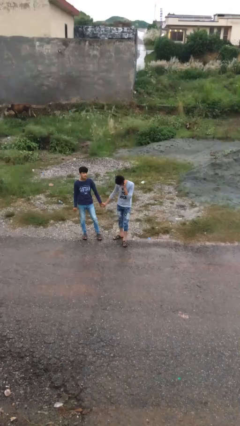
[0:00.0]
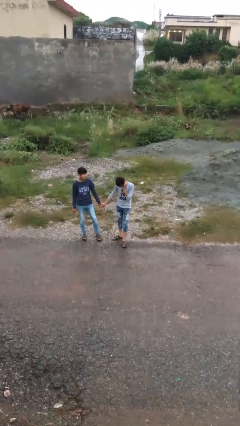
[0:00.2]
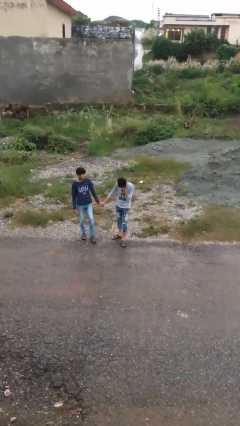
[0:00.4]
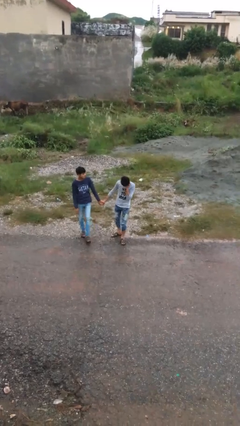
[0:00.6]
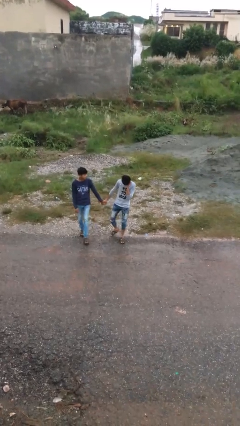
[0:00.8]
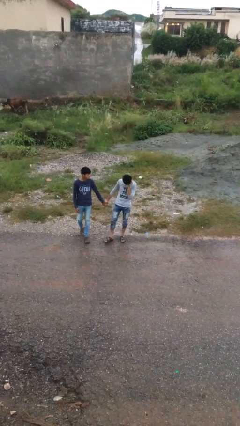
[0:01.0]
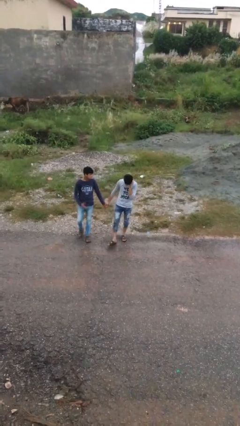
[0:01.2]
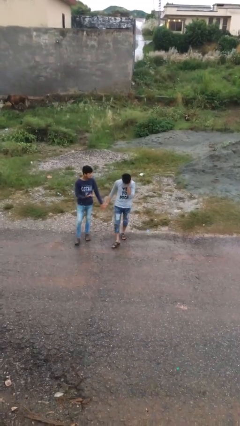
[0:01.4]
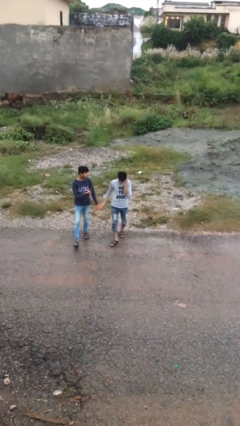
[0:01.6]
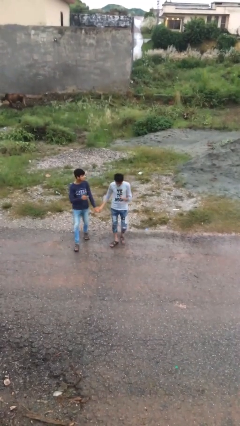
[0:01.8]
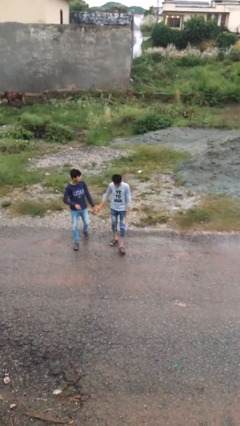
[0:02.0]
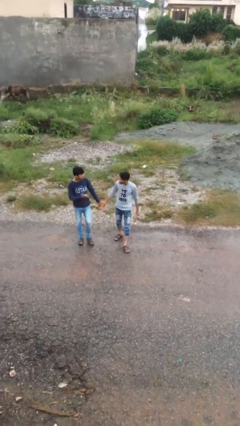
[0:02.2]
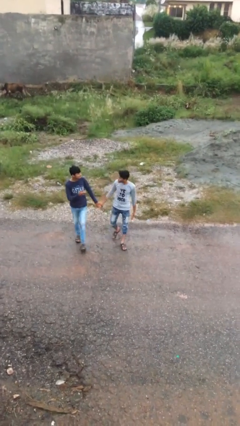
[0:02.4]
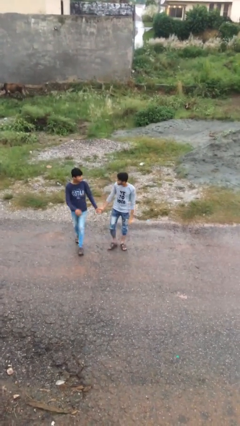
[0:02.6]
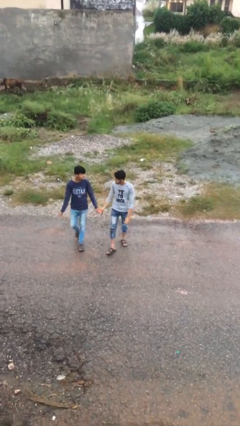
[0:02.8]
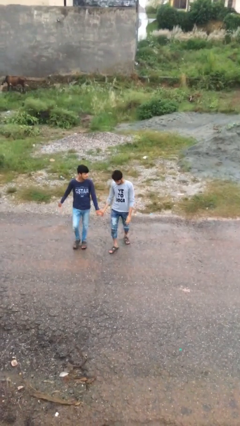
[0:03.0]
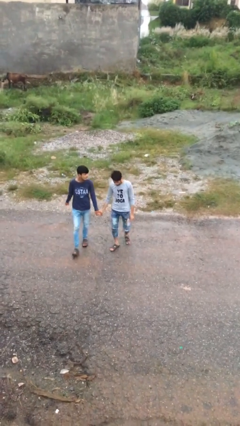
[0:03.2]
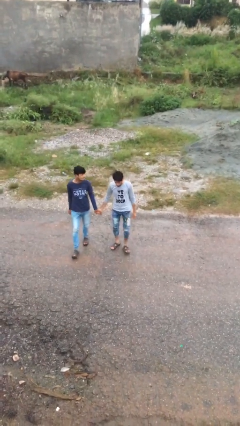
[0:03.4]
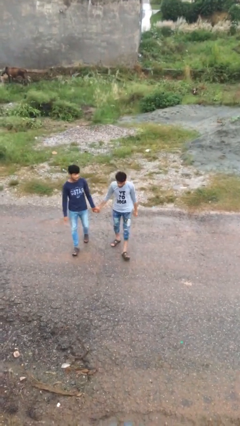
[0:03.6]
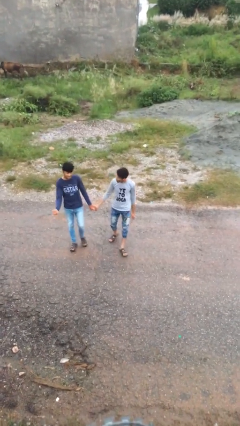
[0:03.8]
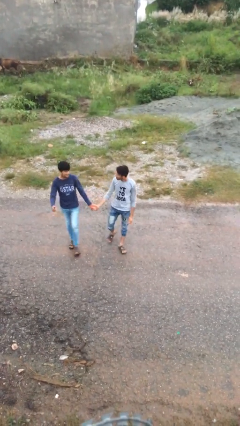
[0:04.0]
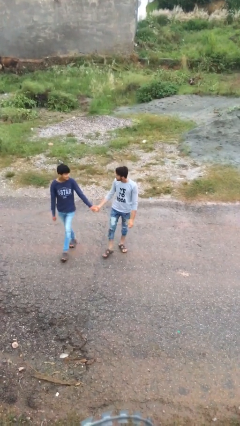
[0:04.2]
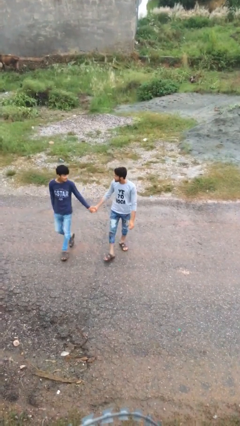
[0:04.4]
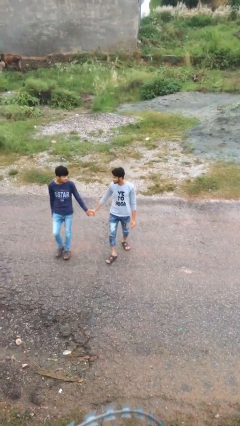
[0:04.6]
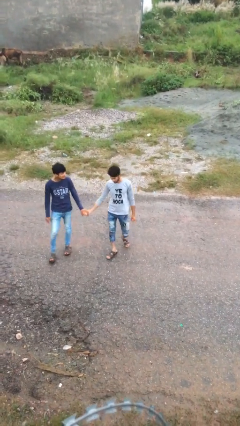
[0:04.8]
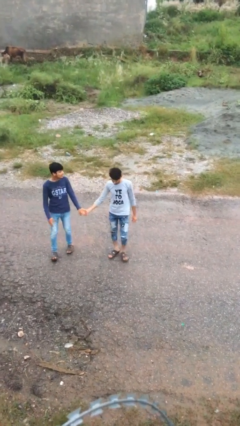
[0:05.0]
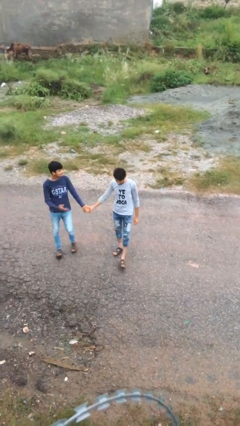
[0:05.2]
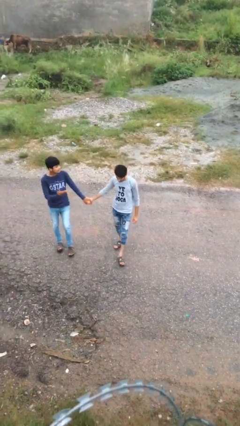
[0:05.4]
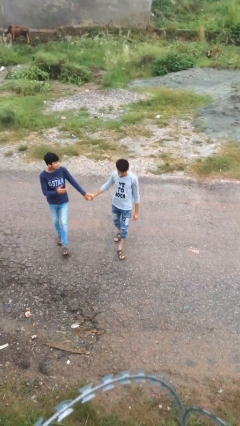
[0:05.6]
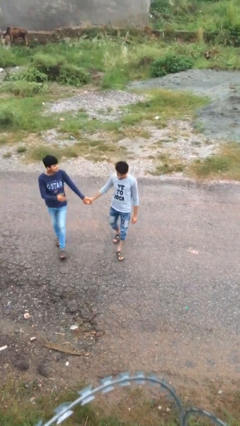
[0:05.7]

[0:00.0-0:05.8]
person holds hand

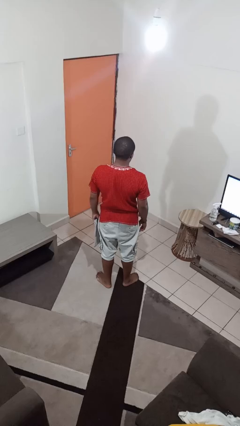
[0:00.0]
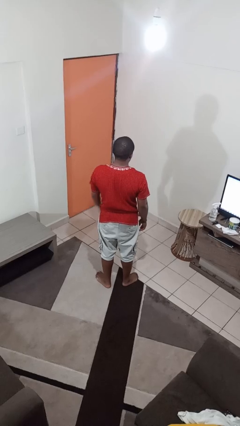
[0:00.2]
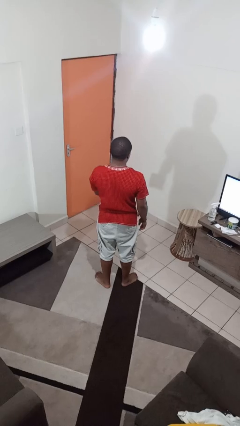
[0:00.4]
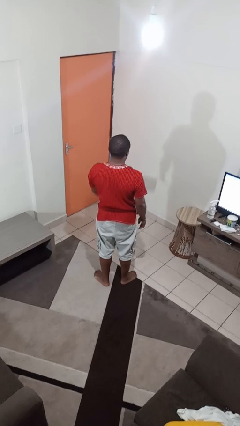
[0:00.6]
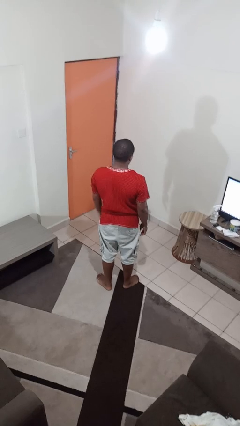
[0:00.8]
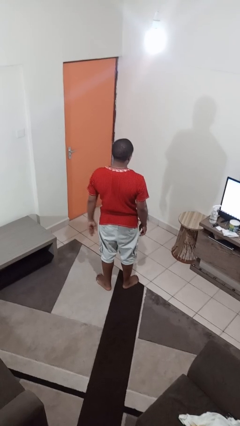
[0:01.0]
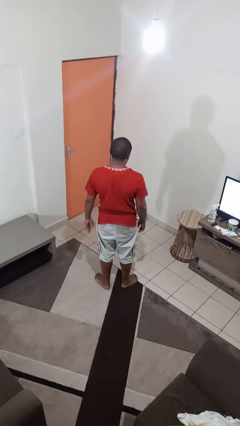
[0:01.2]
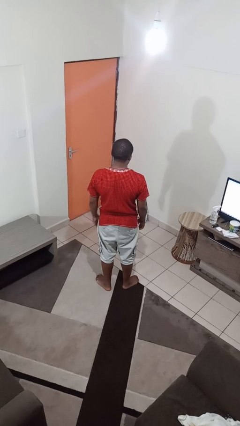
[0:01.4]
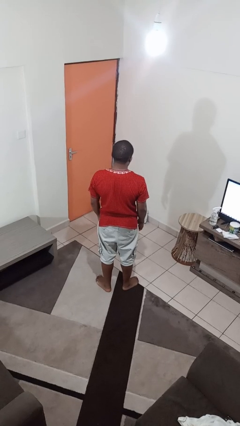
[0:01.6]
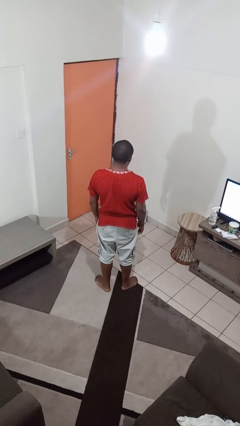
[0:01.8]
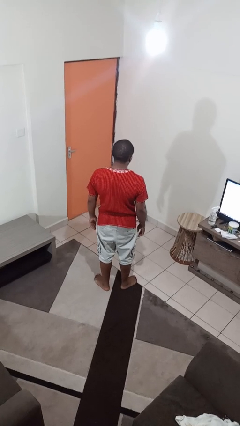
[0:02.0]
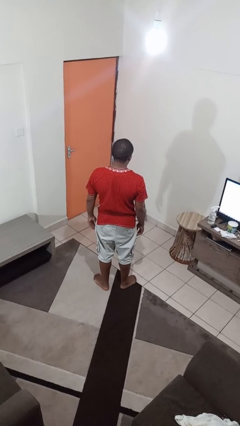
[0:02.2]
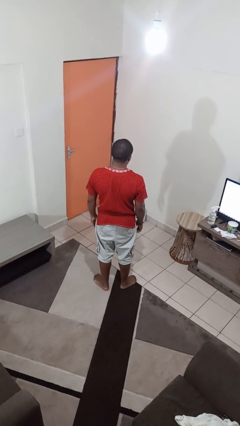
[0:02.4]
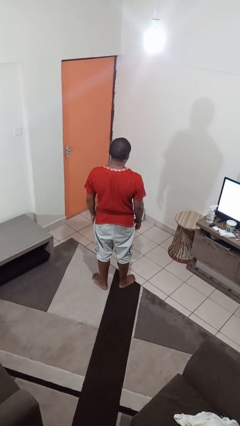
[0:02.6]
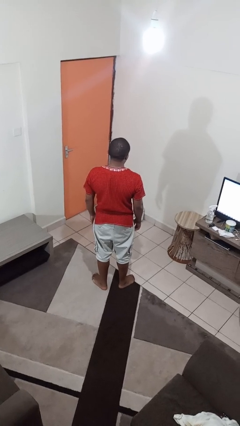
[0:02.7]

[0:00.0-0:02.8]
person throws object to ground

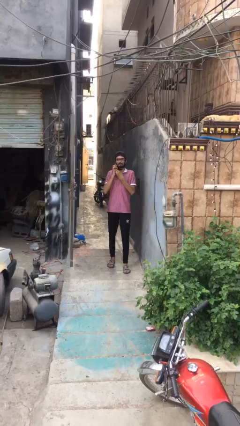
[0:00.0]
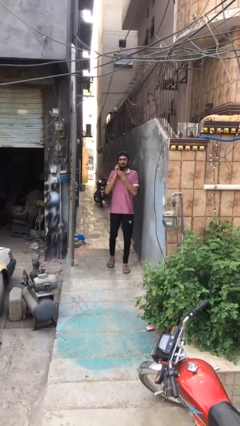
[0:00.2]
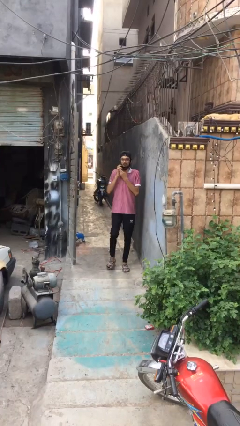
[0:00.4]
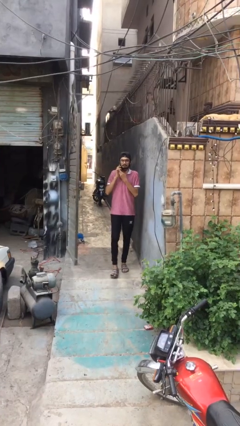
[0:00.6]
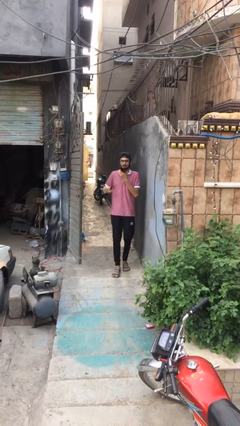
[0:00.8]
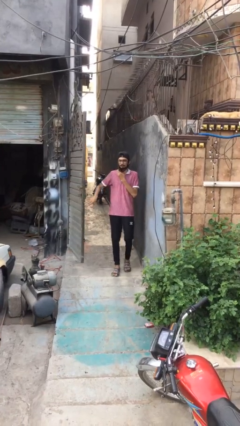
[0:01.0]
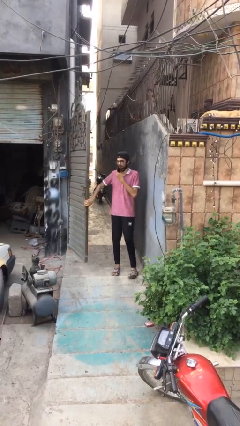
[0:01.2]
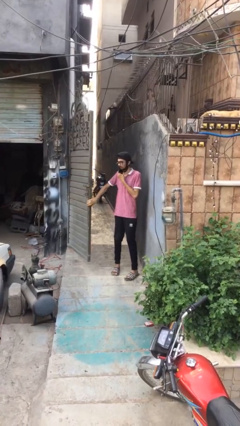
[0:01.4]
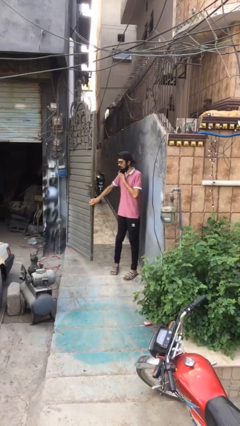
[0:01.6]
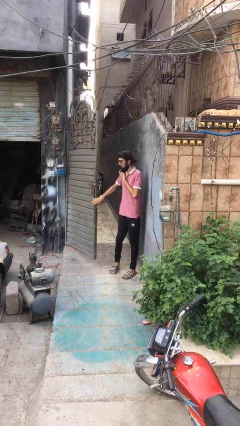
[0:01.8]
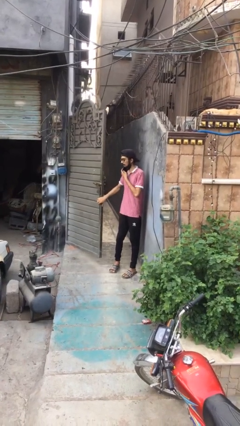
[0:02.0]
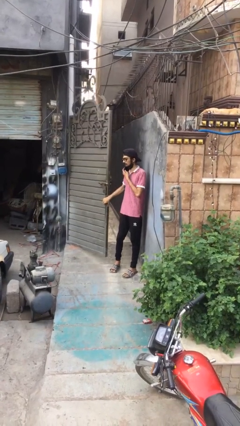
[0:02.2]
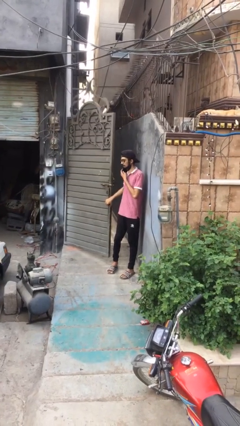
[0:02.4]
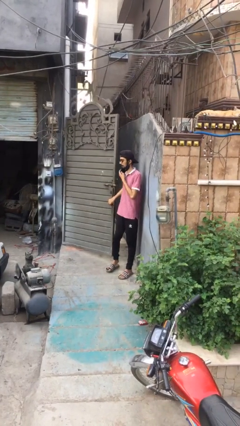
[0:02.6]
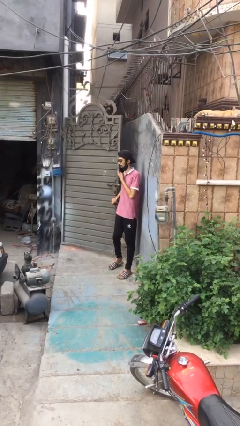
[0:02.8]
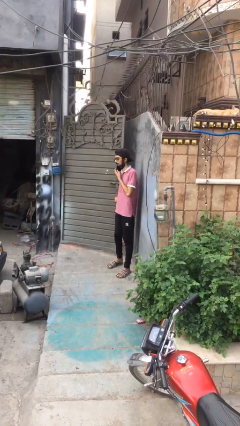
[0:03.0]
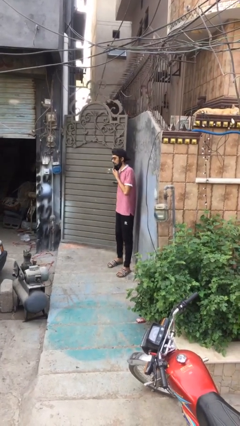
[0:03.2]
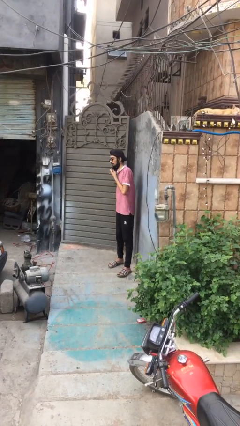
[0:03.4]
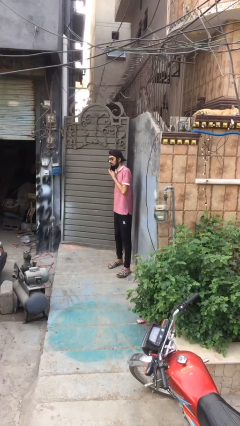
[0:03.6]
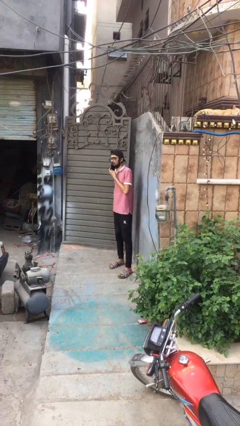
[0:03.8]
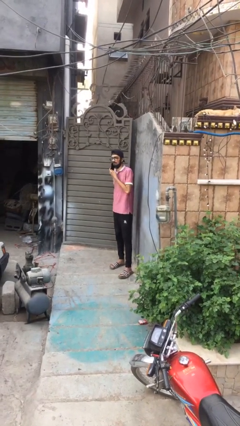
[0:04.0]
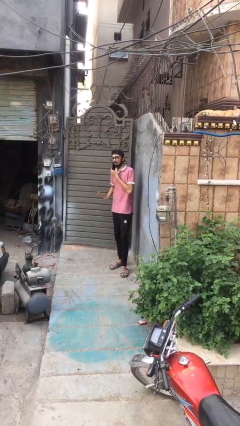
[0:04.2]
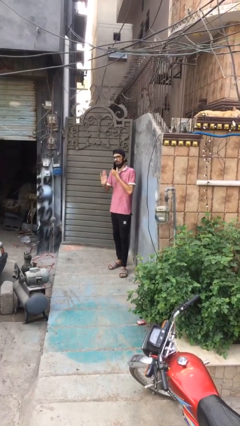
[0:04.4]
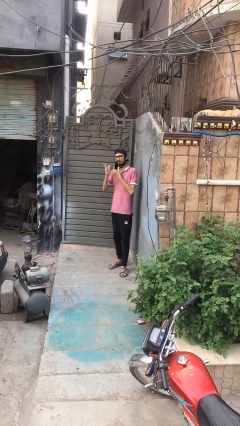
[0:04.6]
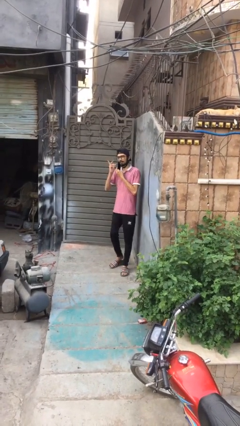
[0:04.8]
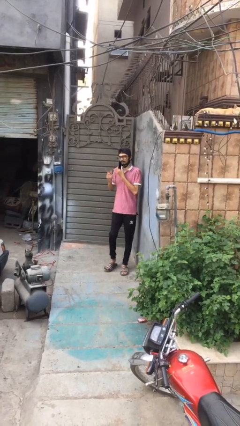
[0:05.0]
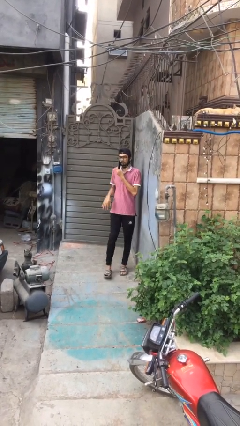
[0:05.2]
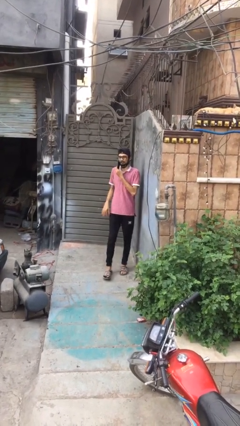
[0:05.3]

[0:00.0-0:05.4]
person closes facility door

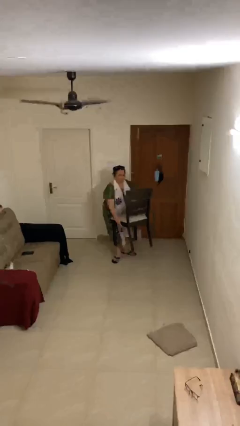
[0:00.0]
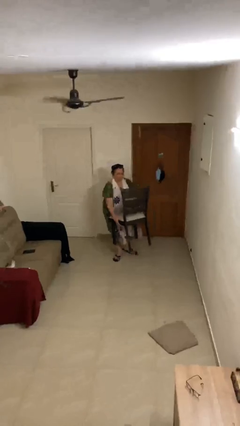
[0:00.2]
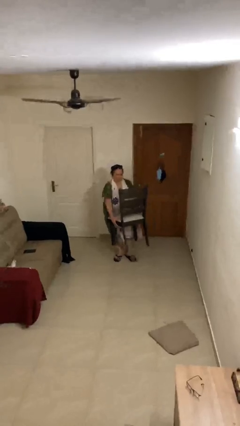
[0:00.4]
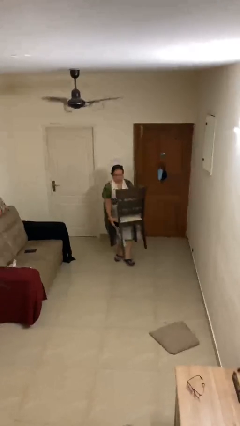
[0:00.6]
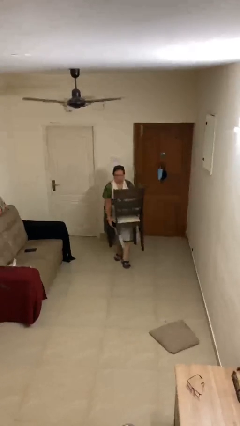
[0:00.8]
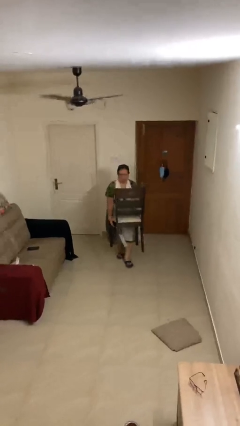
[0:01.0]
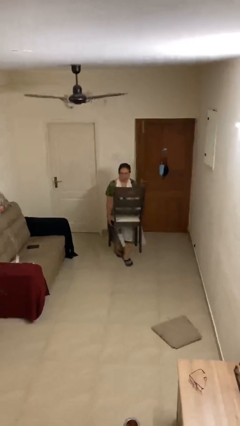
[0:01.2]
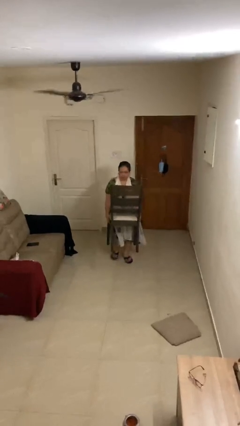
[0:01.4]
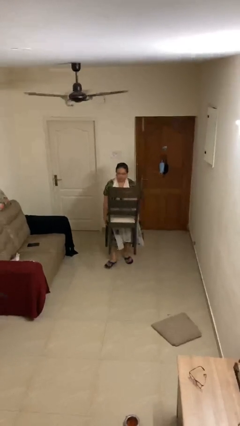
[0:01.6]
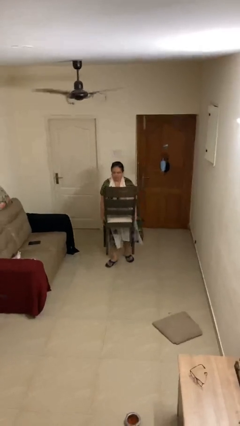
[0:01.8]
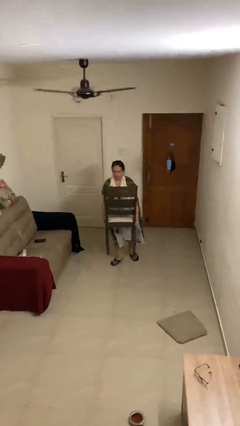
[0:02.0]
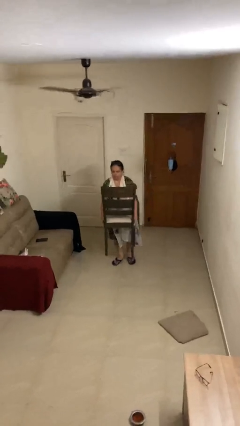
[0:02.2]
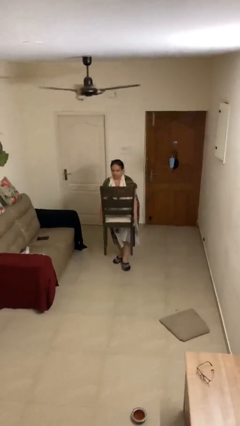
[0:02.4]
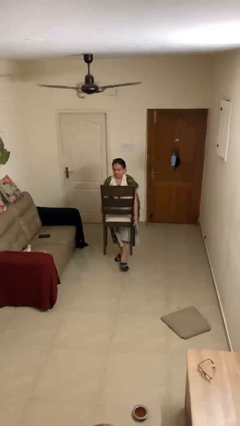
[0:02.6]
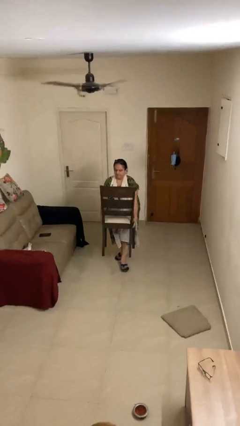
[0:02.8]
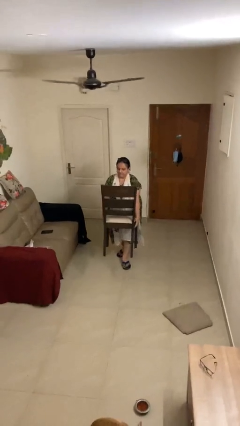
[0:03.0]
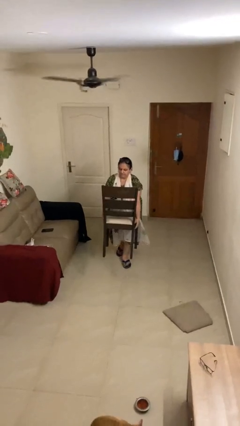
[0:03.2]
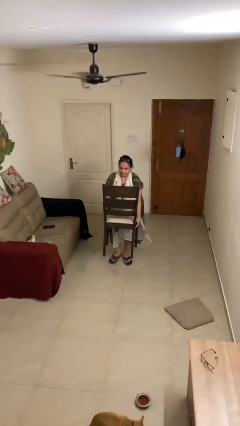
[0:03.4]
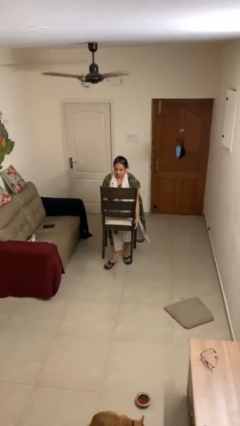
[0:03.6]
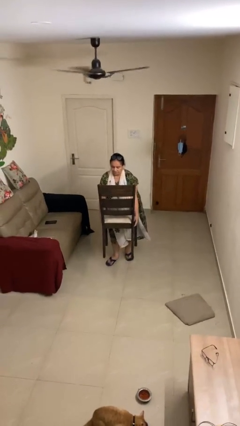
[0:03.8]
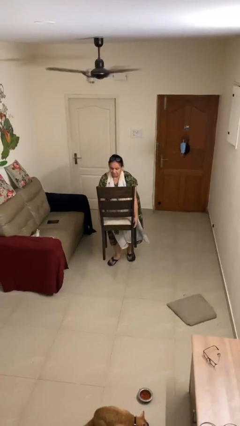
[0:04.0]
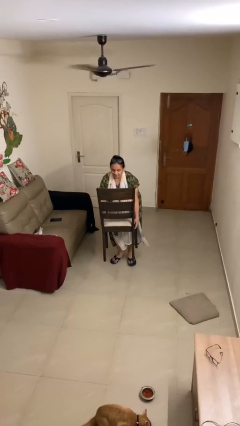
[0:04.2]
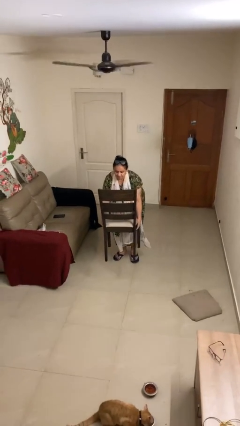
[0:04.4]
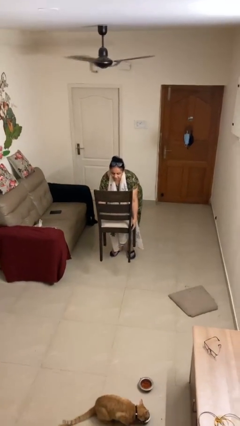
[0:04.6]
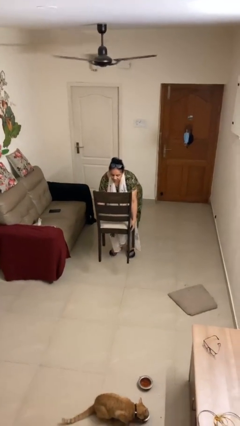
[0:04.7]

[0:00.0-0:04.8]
person carries heavy object
